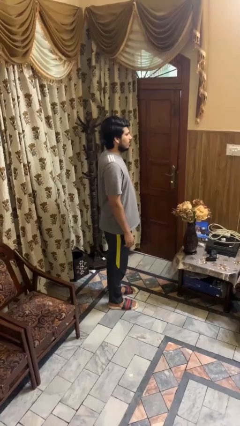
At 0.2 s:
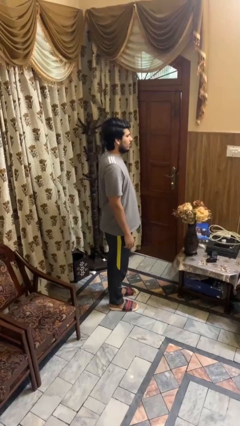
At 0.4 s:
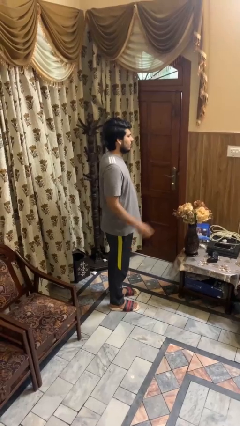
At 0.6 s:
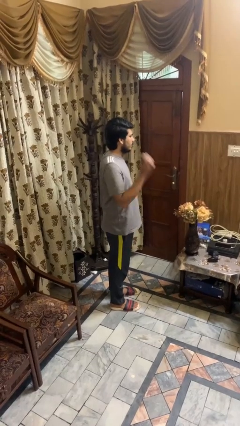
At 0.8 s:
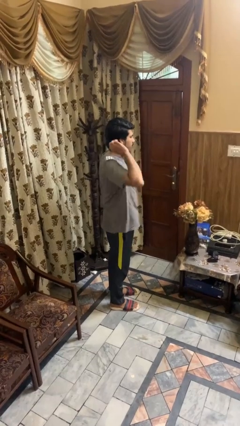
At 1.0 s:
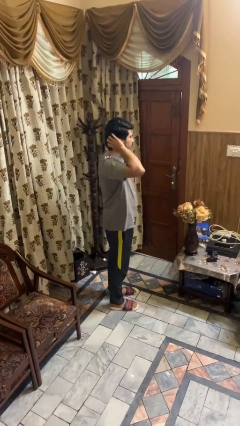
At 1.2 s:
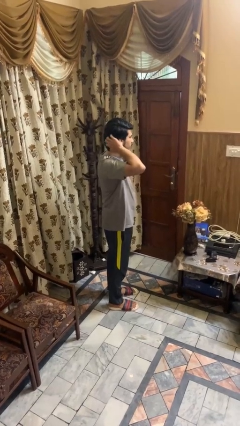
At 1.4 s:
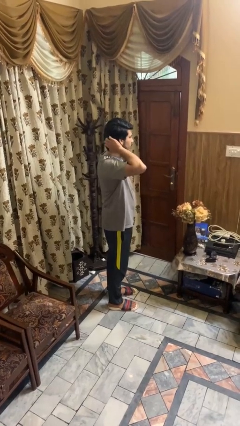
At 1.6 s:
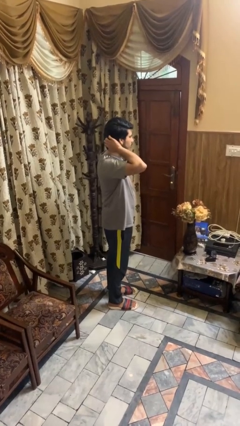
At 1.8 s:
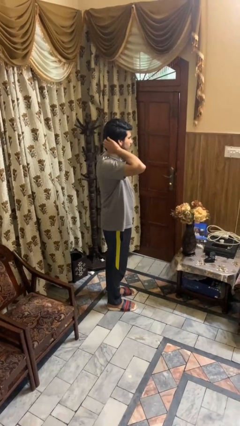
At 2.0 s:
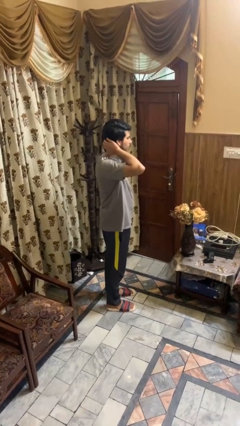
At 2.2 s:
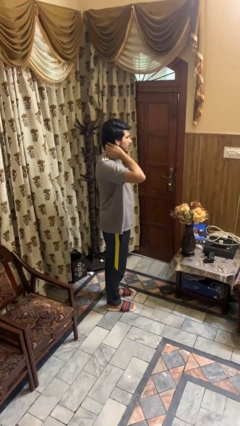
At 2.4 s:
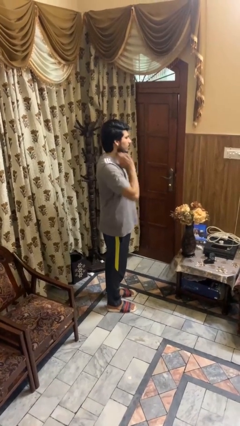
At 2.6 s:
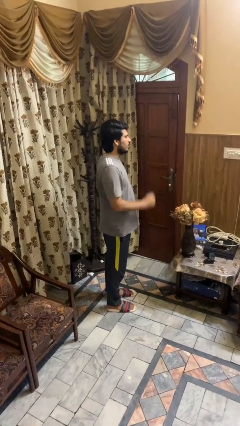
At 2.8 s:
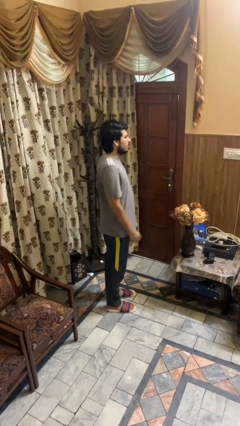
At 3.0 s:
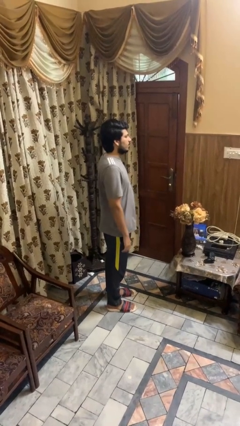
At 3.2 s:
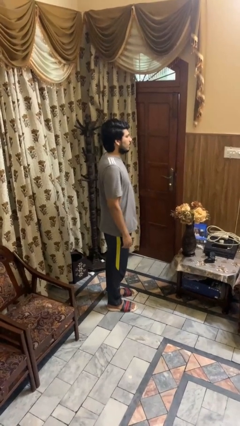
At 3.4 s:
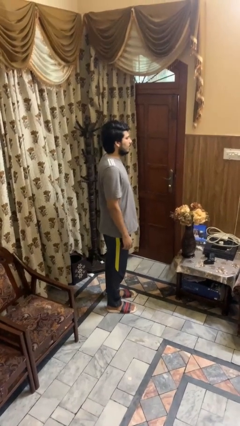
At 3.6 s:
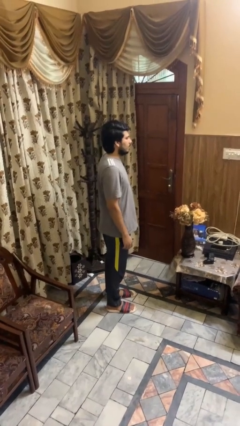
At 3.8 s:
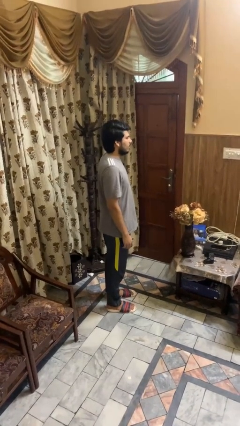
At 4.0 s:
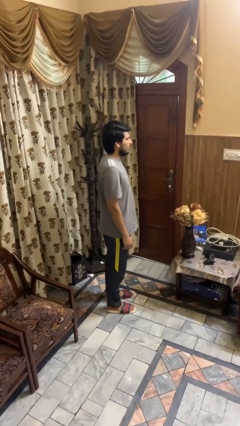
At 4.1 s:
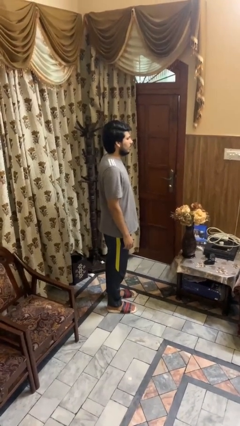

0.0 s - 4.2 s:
person scratches face

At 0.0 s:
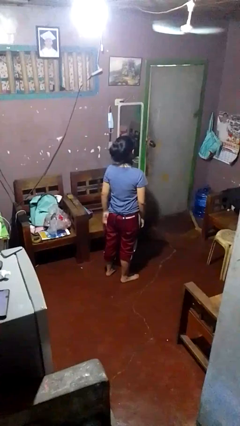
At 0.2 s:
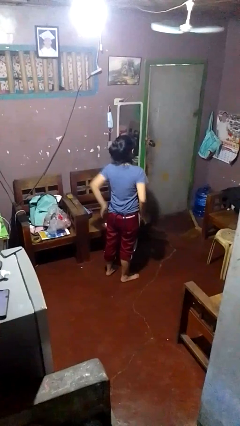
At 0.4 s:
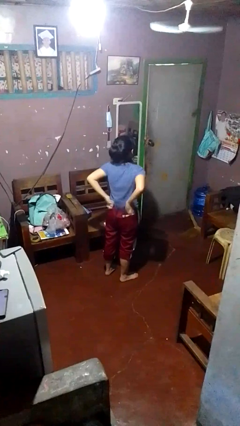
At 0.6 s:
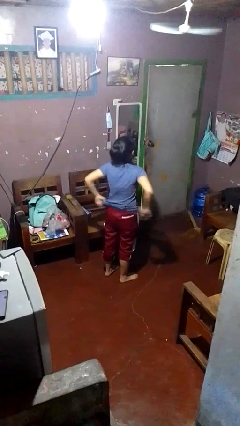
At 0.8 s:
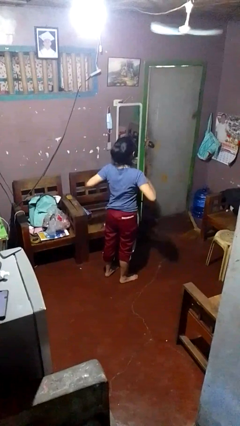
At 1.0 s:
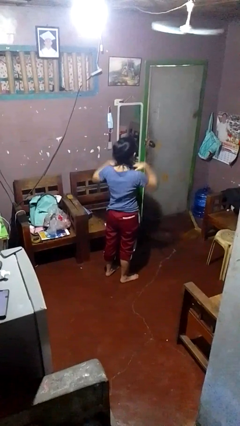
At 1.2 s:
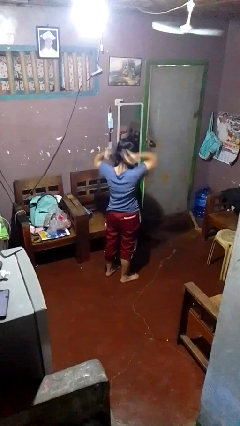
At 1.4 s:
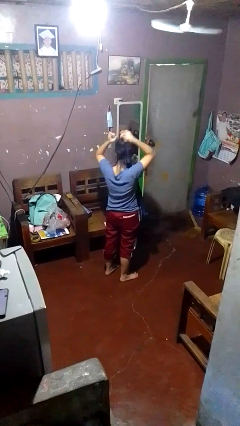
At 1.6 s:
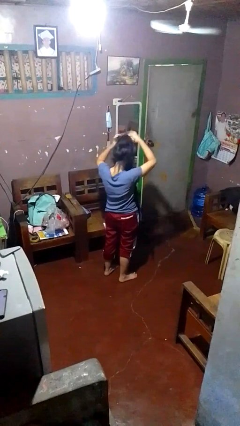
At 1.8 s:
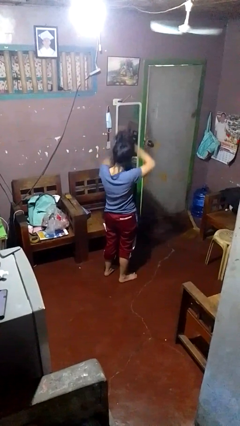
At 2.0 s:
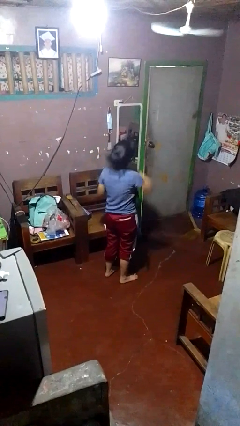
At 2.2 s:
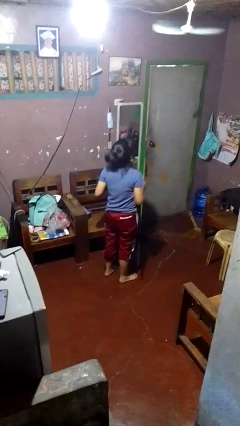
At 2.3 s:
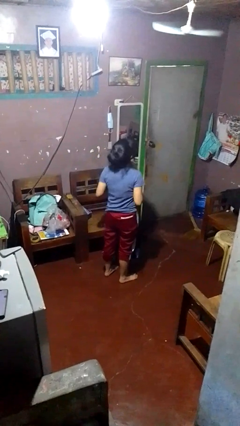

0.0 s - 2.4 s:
person takes off apron

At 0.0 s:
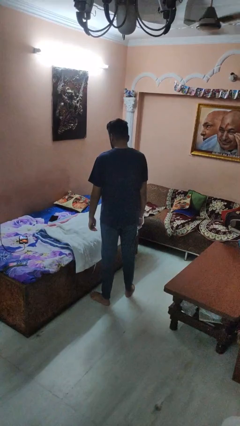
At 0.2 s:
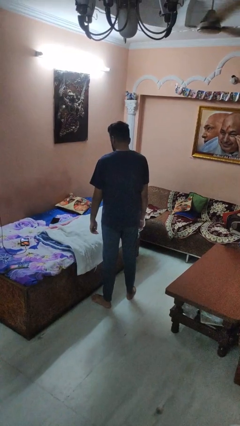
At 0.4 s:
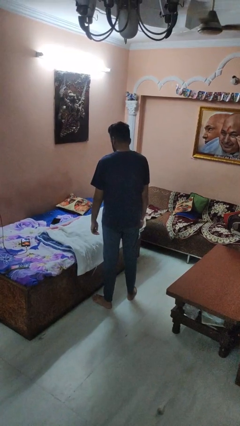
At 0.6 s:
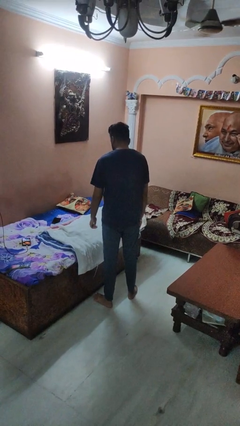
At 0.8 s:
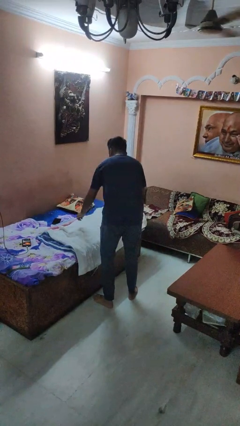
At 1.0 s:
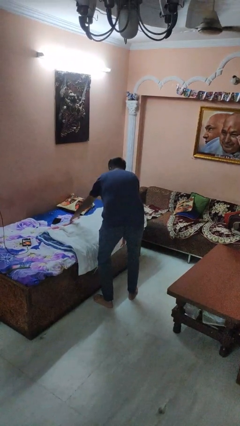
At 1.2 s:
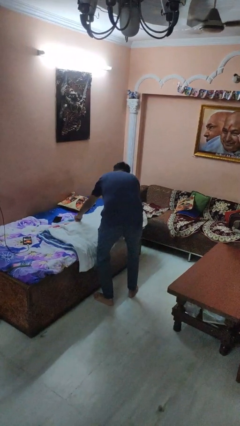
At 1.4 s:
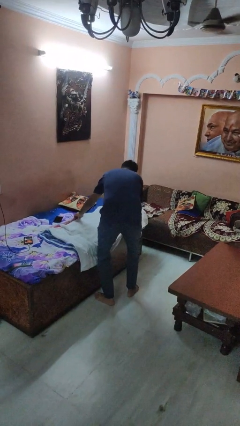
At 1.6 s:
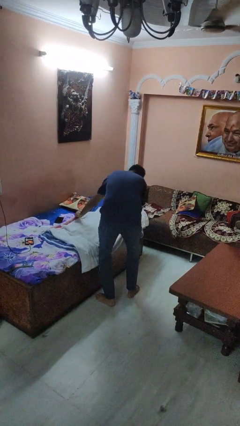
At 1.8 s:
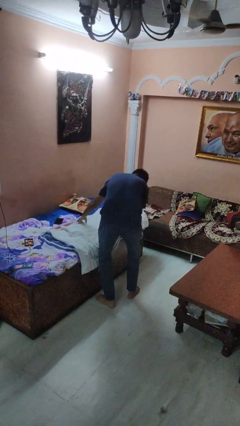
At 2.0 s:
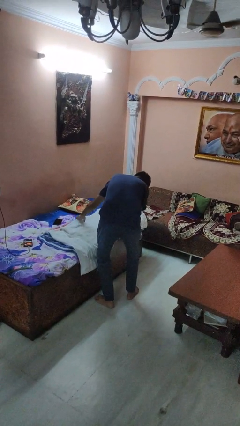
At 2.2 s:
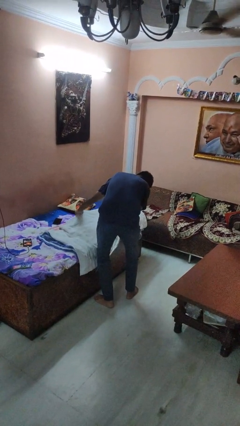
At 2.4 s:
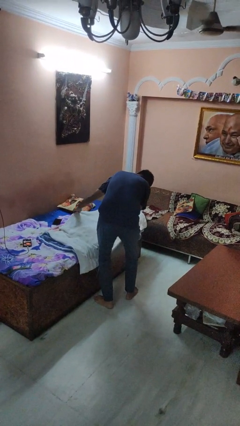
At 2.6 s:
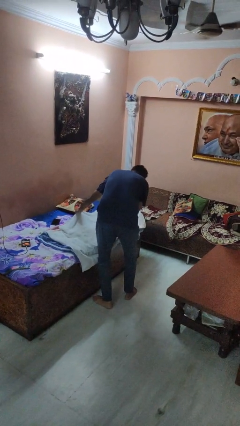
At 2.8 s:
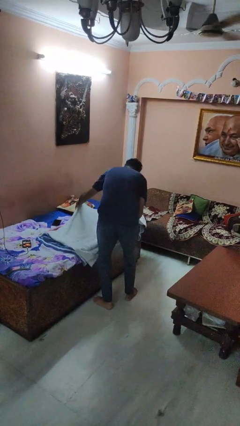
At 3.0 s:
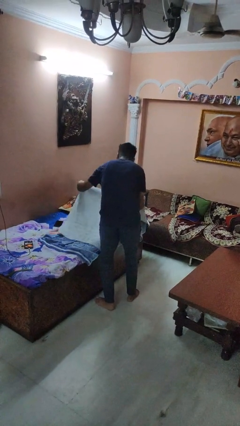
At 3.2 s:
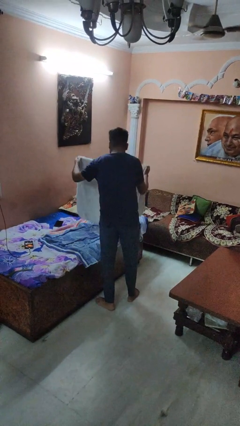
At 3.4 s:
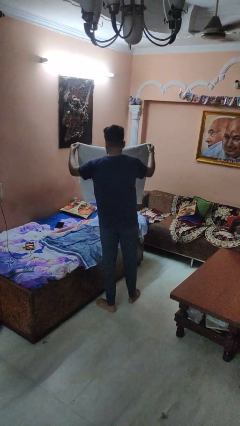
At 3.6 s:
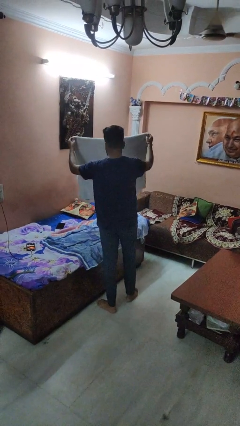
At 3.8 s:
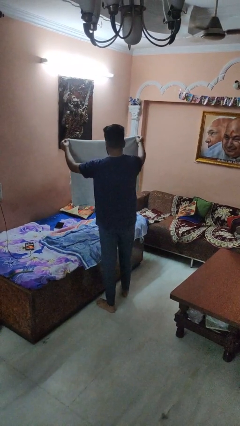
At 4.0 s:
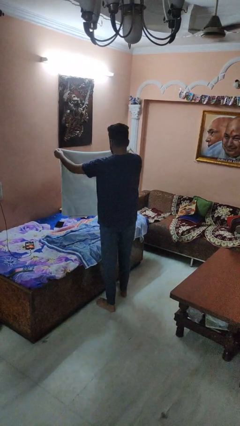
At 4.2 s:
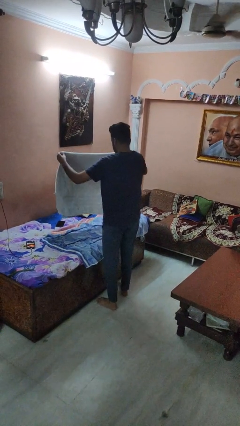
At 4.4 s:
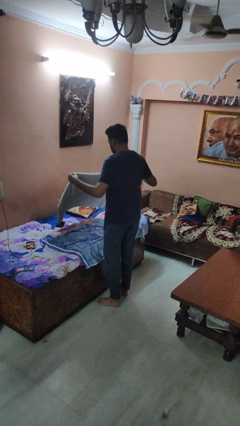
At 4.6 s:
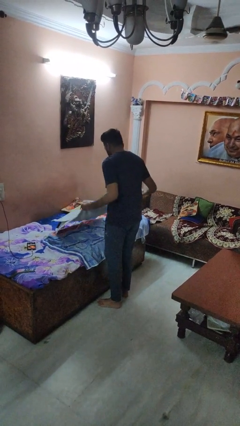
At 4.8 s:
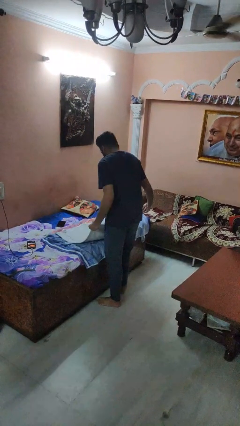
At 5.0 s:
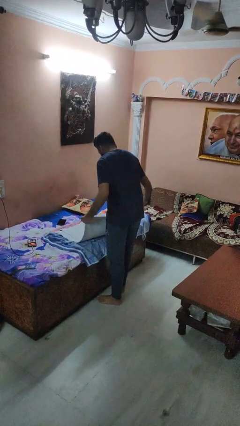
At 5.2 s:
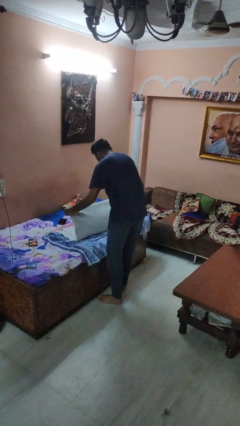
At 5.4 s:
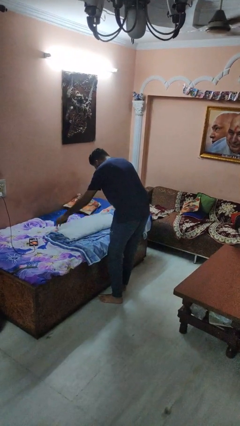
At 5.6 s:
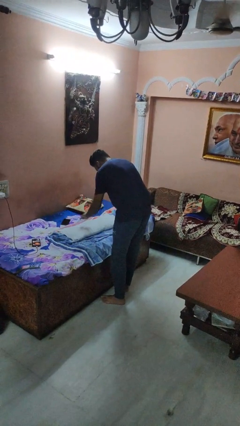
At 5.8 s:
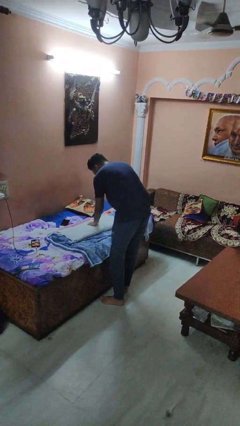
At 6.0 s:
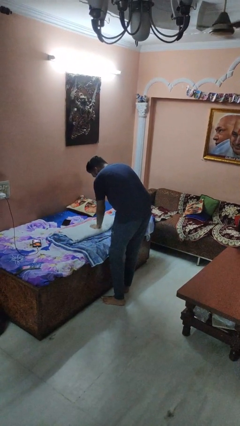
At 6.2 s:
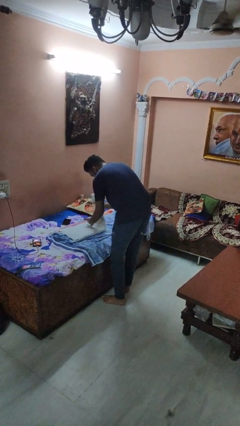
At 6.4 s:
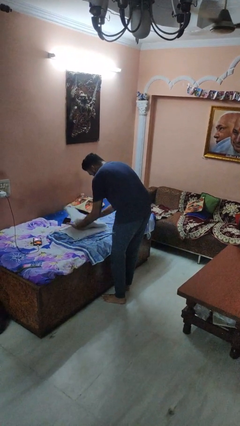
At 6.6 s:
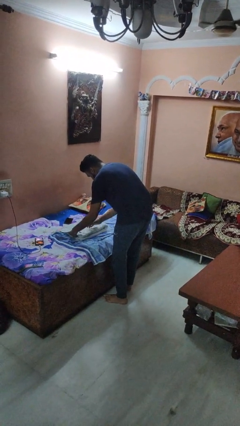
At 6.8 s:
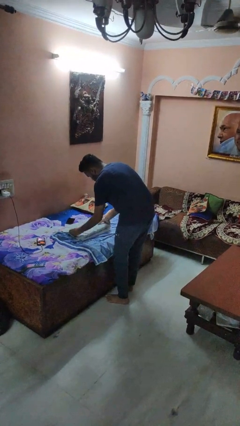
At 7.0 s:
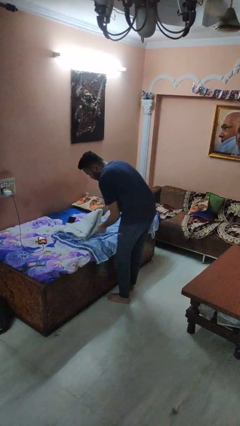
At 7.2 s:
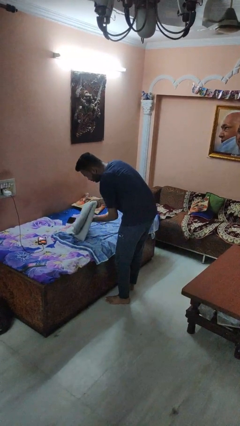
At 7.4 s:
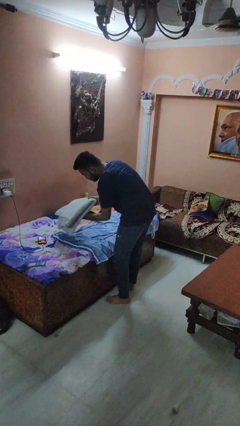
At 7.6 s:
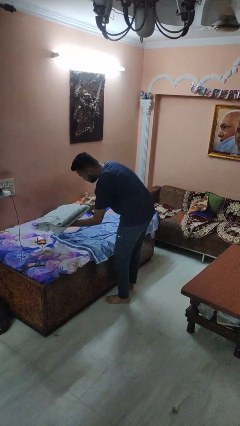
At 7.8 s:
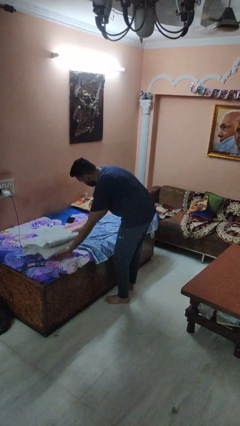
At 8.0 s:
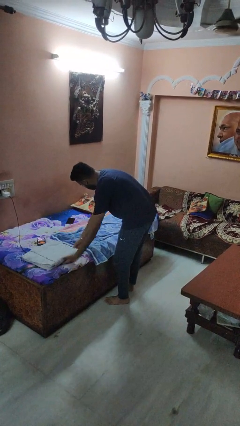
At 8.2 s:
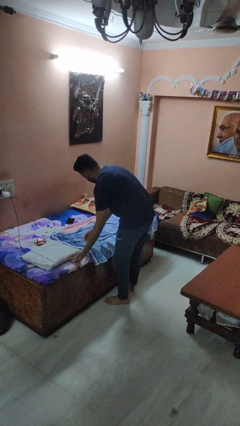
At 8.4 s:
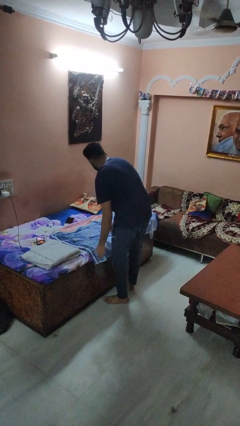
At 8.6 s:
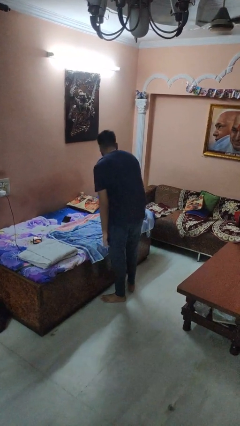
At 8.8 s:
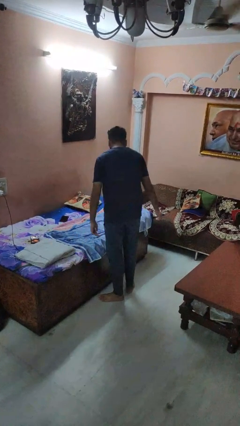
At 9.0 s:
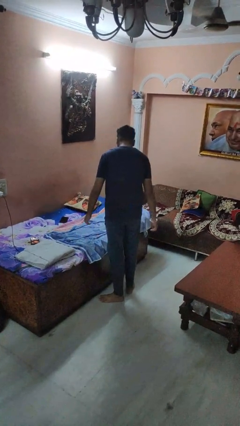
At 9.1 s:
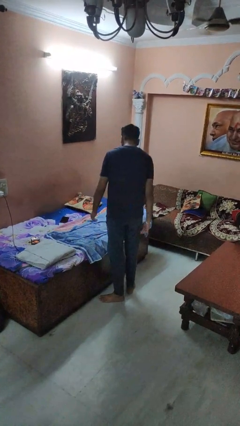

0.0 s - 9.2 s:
person folds towel

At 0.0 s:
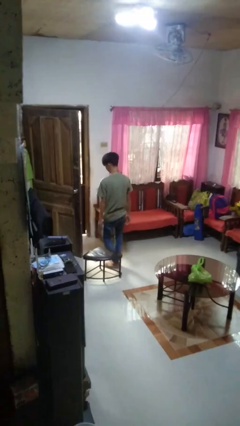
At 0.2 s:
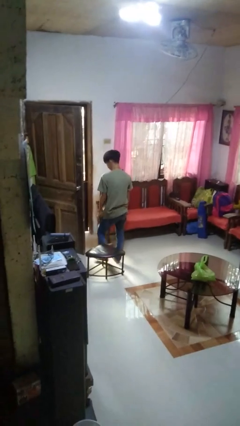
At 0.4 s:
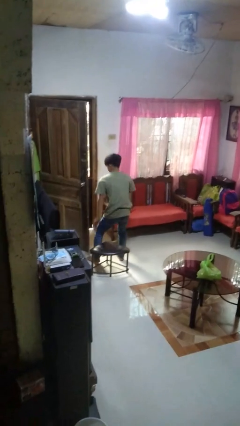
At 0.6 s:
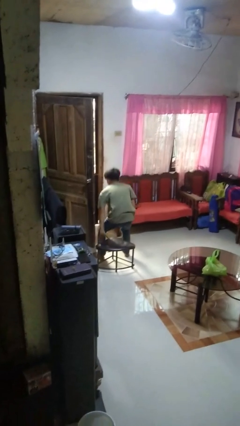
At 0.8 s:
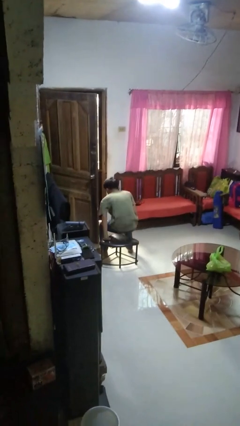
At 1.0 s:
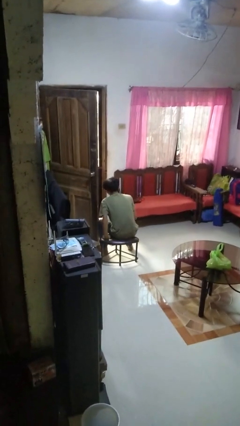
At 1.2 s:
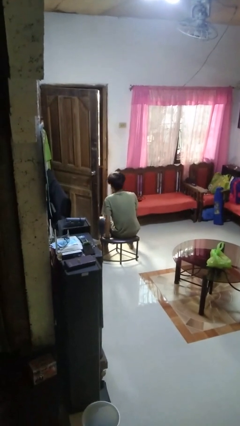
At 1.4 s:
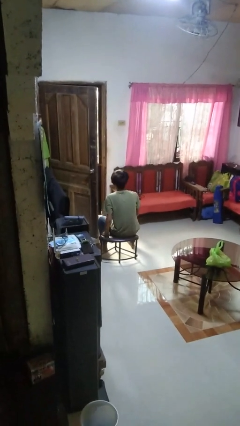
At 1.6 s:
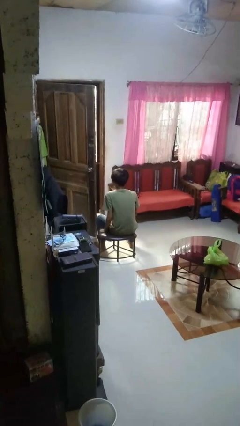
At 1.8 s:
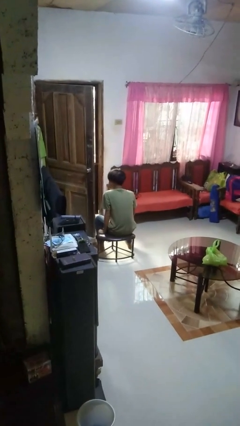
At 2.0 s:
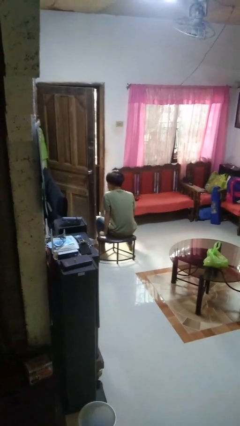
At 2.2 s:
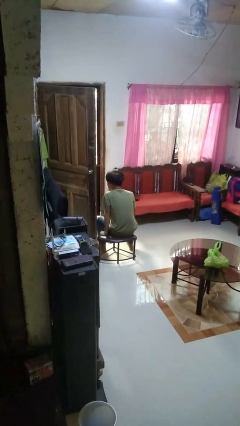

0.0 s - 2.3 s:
person sits down
